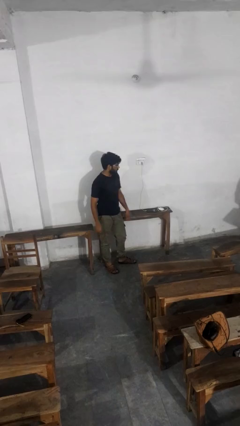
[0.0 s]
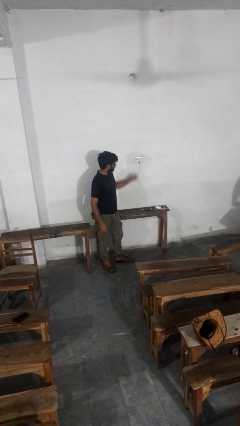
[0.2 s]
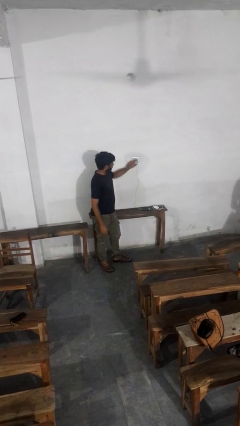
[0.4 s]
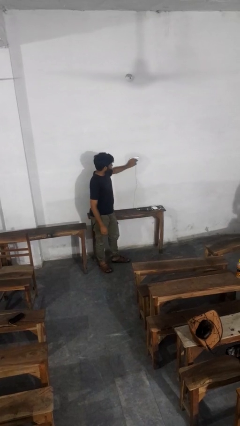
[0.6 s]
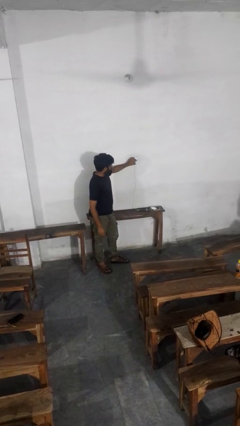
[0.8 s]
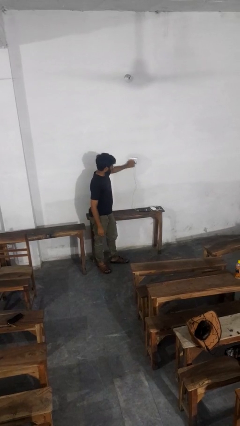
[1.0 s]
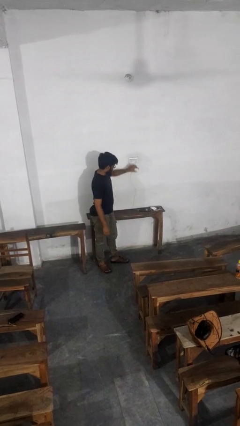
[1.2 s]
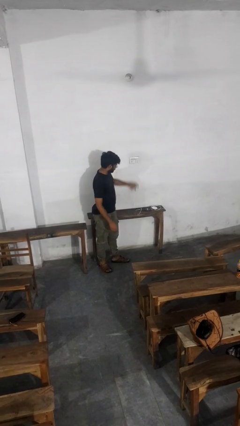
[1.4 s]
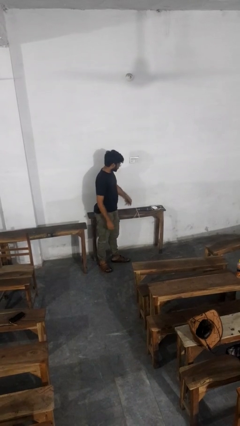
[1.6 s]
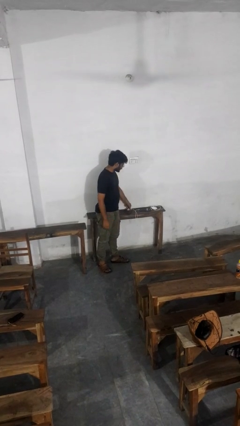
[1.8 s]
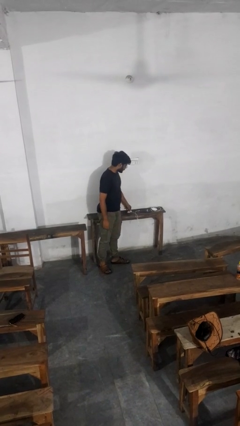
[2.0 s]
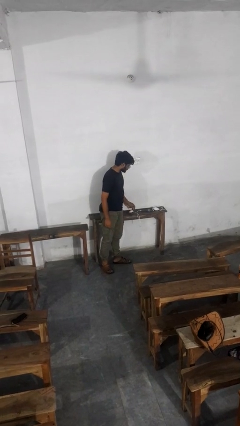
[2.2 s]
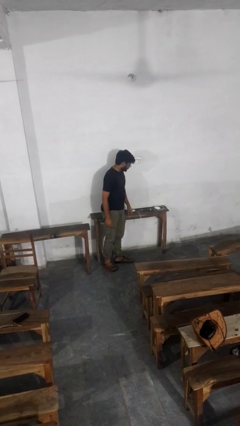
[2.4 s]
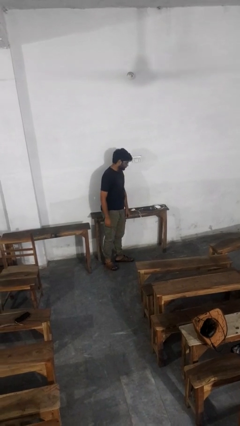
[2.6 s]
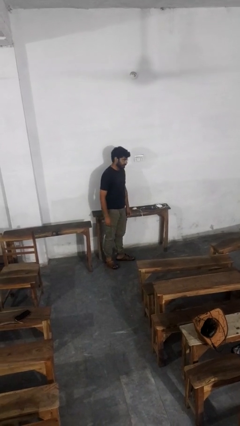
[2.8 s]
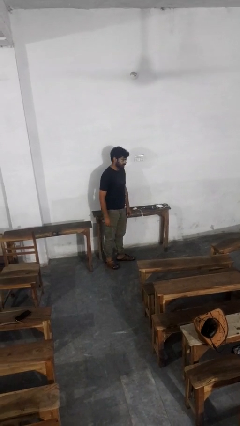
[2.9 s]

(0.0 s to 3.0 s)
person unplugs from electrical socket

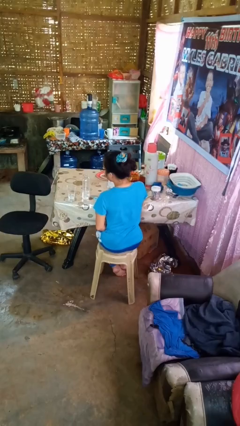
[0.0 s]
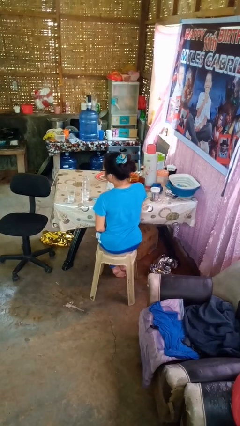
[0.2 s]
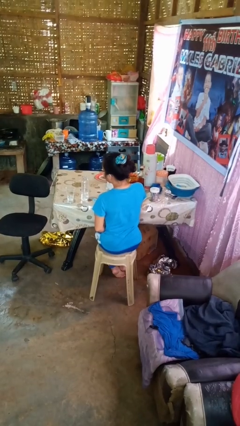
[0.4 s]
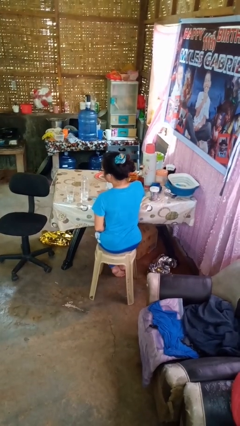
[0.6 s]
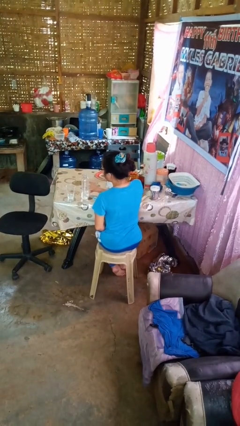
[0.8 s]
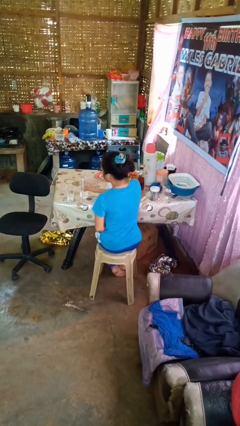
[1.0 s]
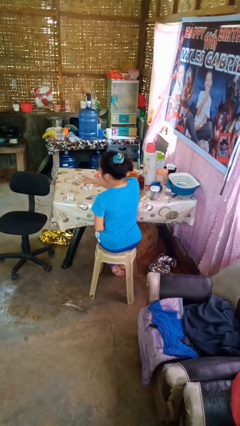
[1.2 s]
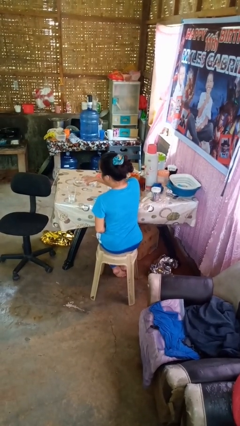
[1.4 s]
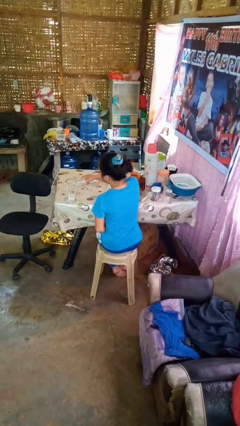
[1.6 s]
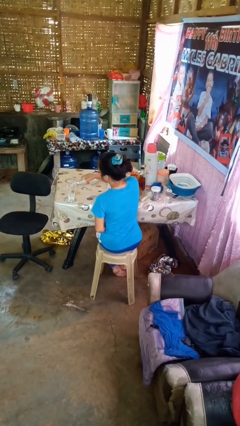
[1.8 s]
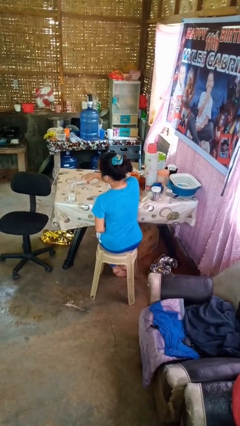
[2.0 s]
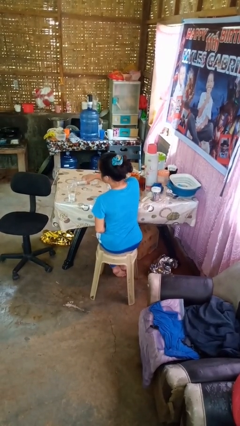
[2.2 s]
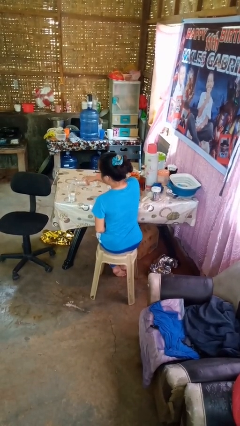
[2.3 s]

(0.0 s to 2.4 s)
person pours liquid into cup

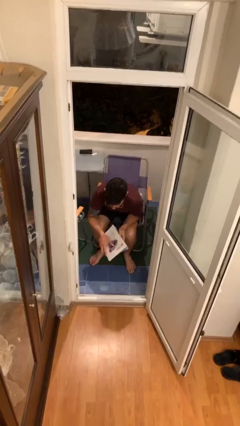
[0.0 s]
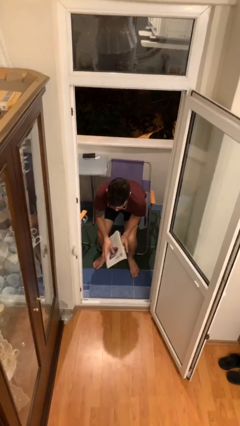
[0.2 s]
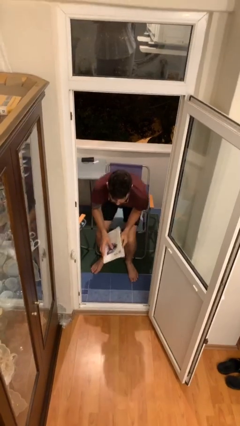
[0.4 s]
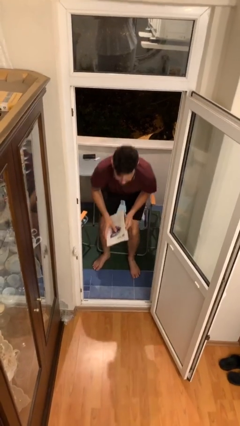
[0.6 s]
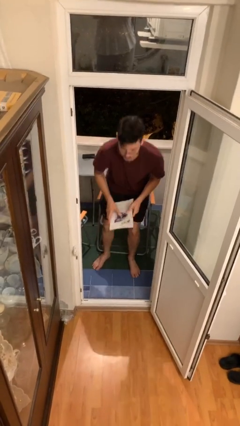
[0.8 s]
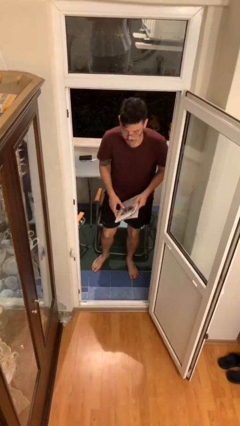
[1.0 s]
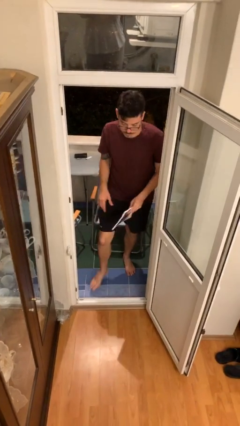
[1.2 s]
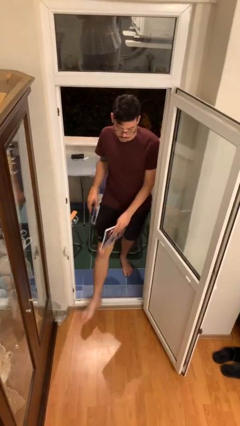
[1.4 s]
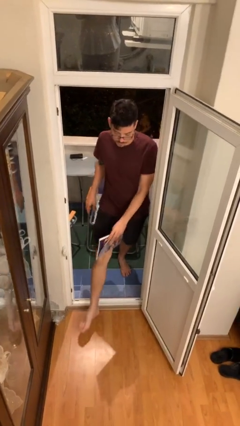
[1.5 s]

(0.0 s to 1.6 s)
person stands up

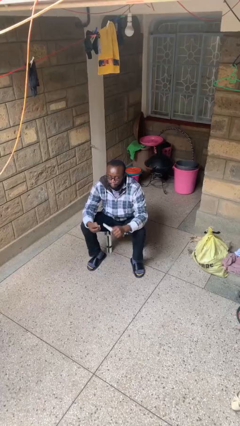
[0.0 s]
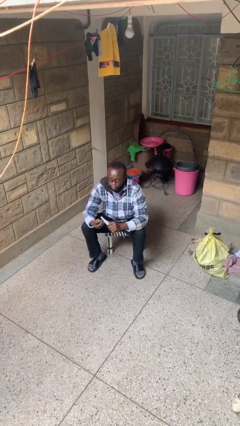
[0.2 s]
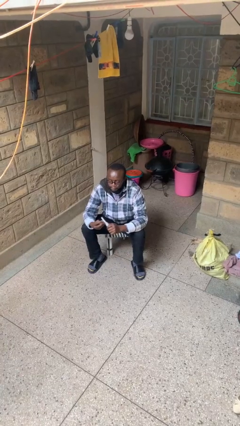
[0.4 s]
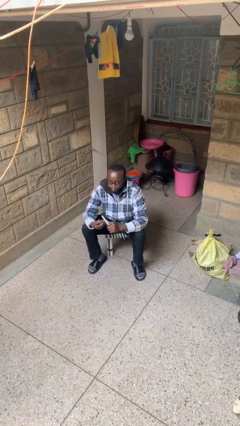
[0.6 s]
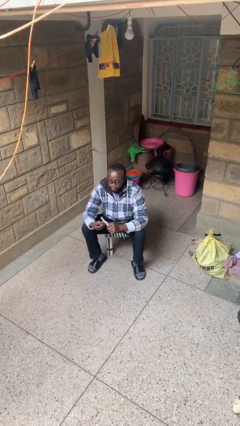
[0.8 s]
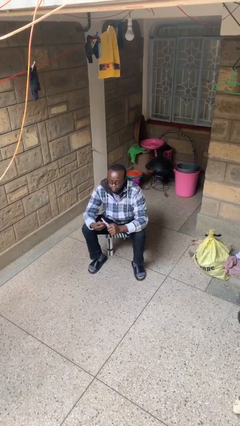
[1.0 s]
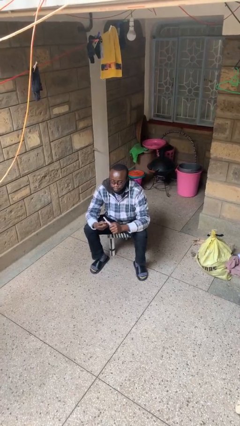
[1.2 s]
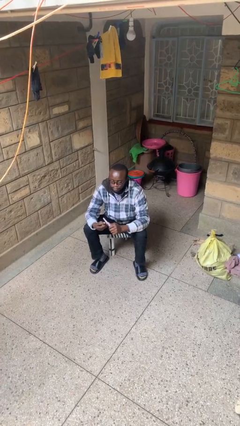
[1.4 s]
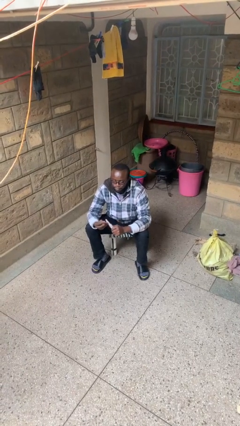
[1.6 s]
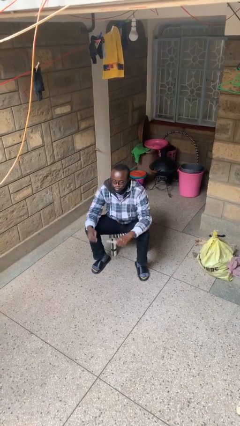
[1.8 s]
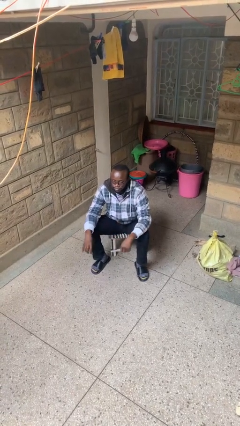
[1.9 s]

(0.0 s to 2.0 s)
person files fingernails

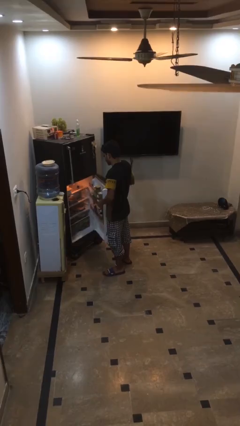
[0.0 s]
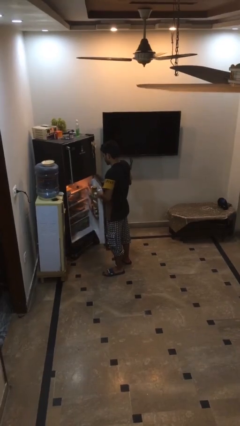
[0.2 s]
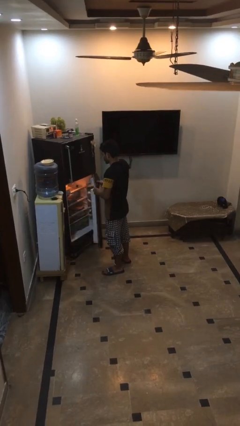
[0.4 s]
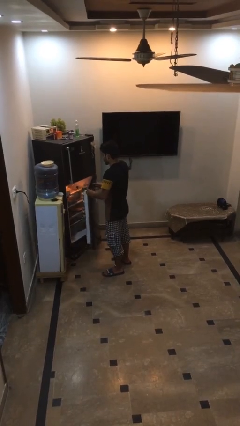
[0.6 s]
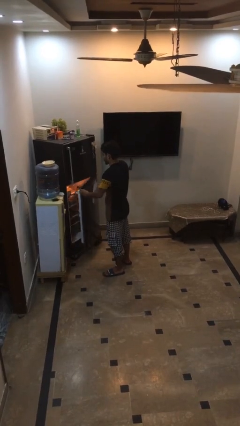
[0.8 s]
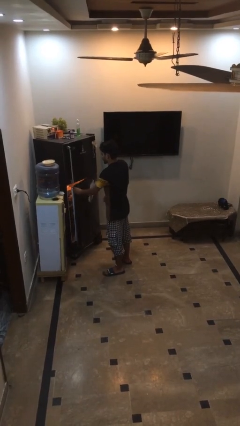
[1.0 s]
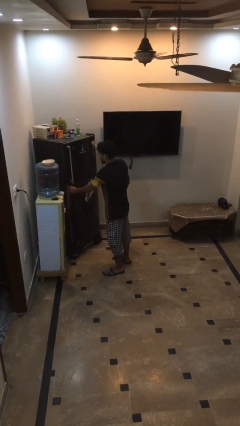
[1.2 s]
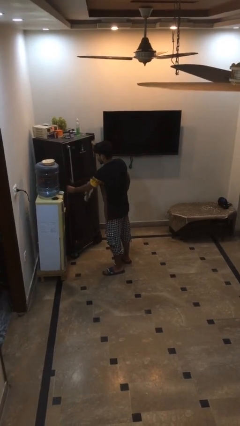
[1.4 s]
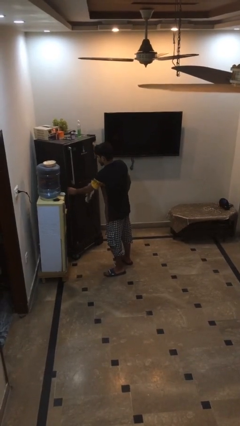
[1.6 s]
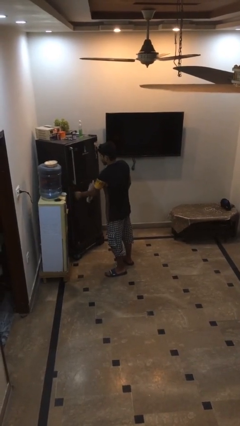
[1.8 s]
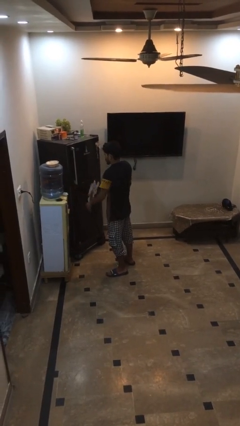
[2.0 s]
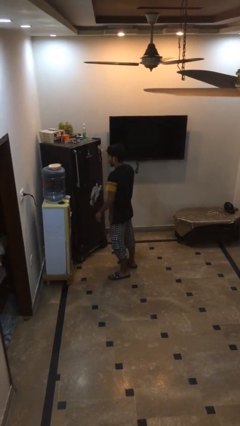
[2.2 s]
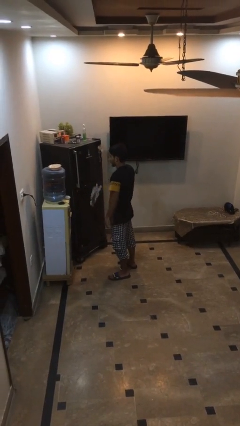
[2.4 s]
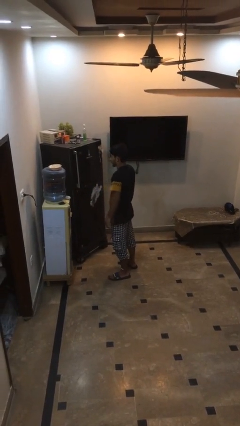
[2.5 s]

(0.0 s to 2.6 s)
person closes refrigerator

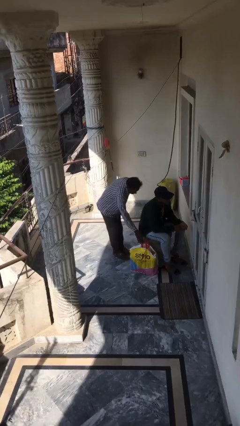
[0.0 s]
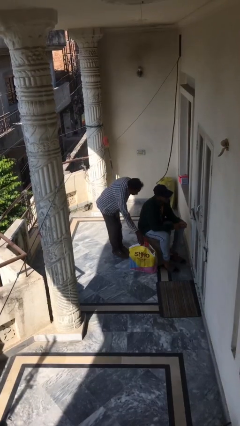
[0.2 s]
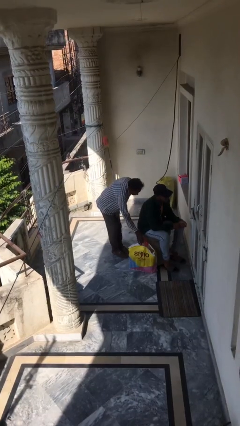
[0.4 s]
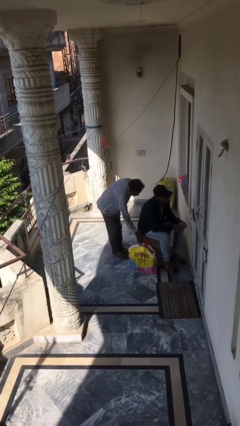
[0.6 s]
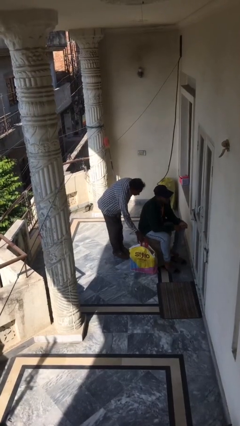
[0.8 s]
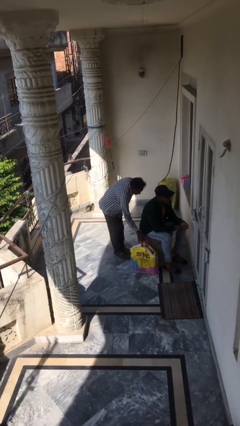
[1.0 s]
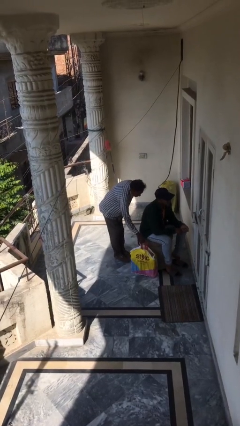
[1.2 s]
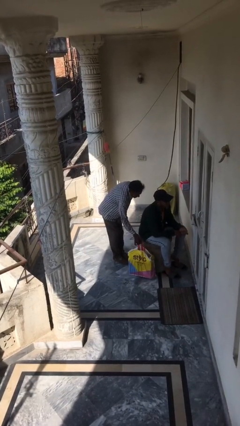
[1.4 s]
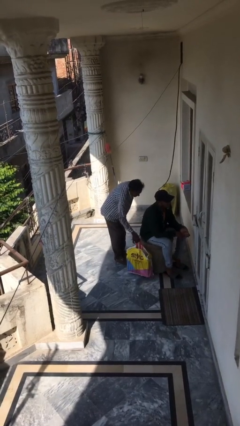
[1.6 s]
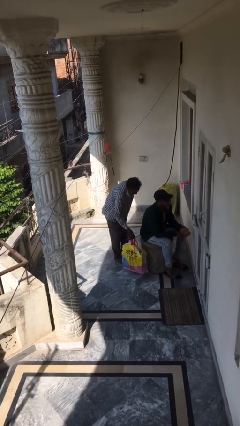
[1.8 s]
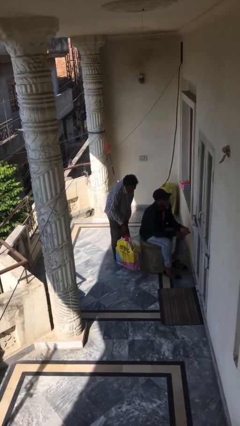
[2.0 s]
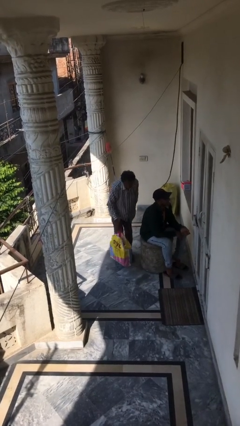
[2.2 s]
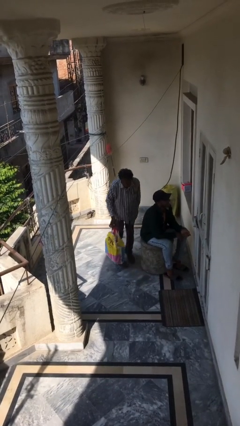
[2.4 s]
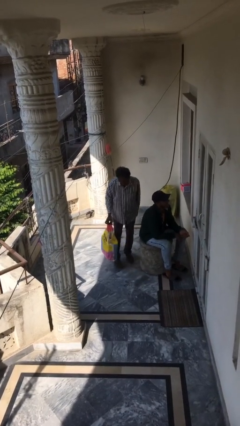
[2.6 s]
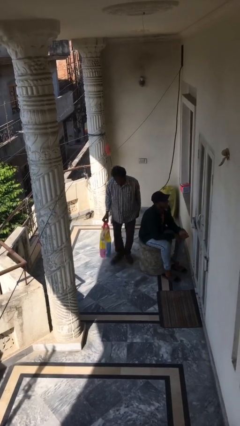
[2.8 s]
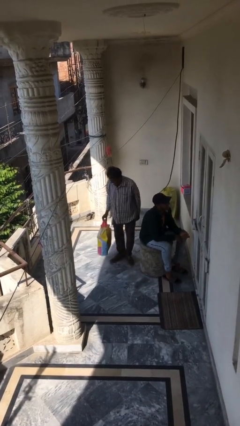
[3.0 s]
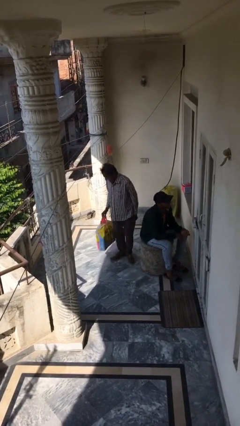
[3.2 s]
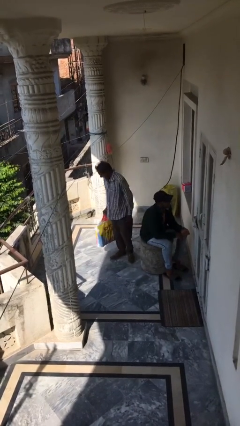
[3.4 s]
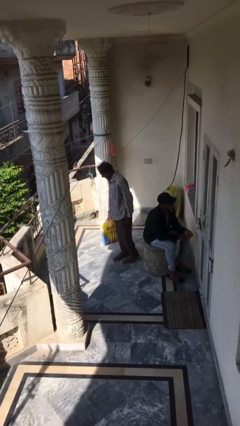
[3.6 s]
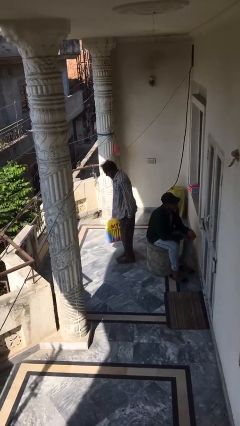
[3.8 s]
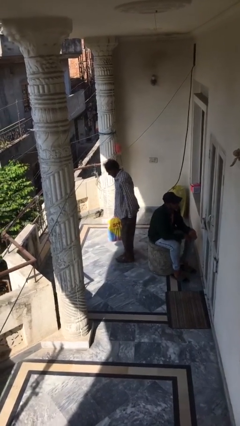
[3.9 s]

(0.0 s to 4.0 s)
person steals object from person

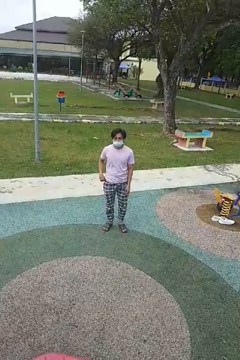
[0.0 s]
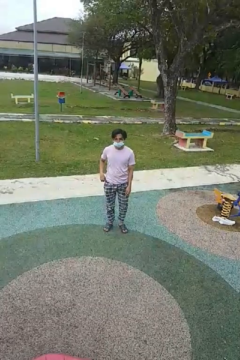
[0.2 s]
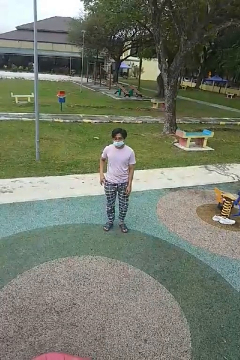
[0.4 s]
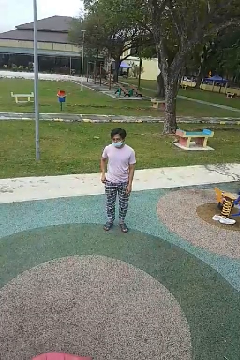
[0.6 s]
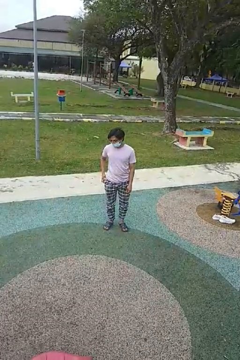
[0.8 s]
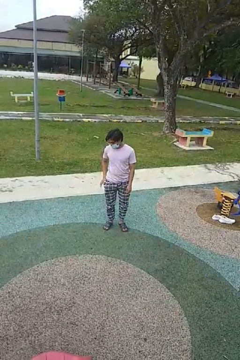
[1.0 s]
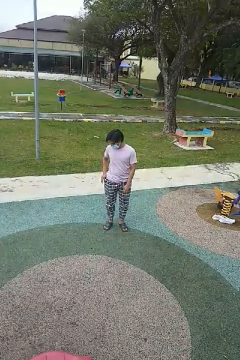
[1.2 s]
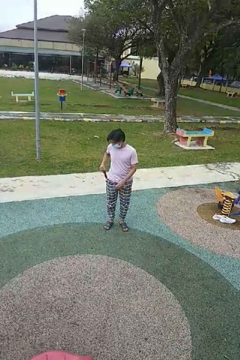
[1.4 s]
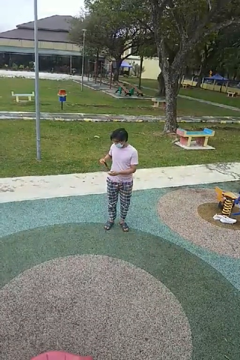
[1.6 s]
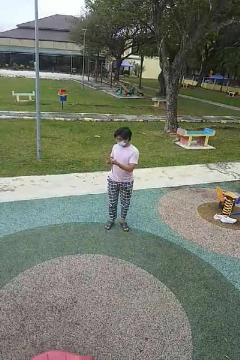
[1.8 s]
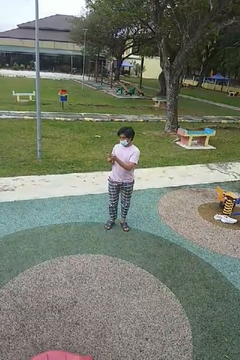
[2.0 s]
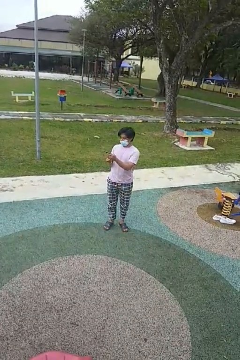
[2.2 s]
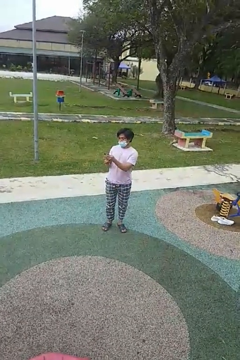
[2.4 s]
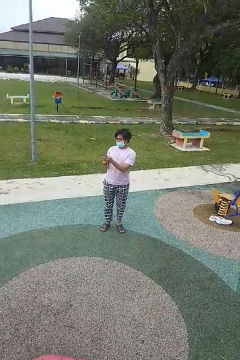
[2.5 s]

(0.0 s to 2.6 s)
person takes phone from pocket
